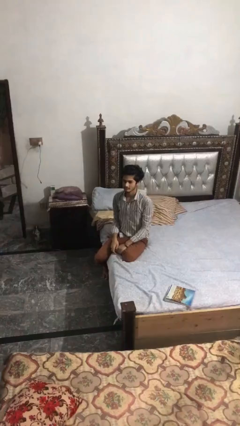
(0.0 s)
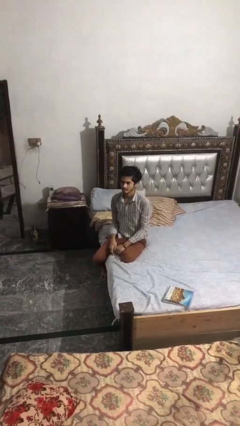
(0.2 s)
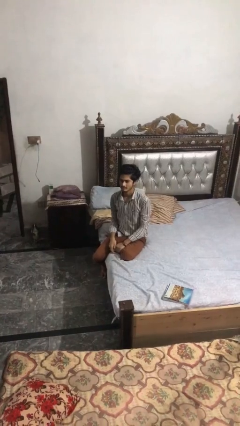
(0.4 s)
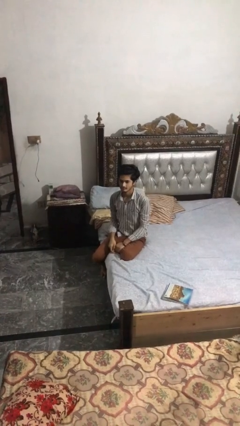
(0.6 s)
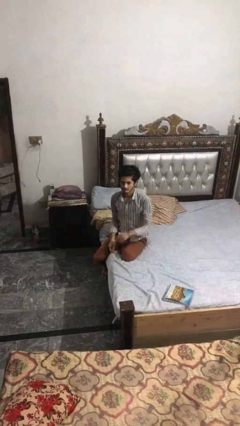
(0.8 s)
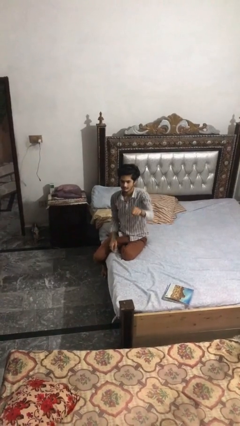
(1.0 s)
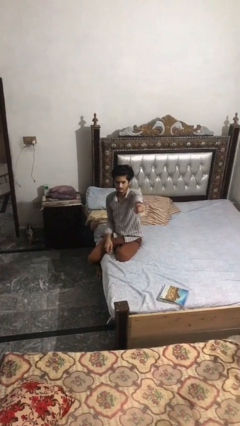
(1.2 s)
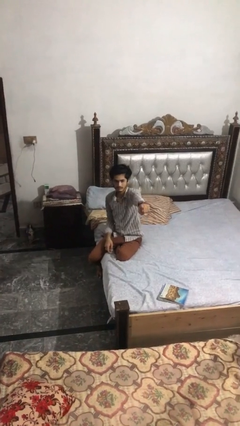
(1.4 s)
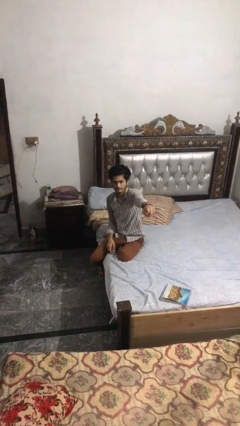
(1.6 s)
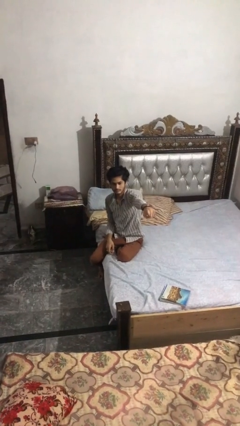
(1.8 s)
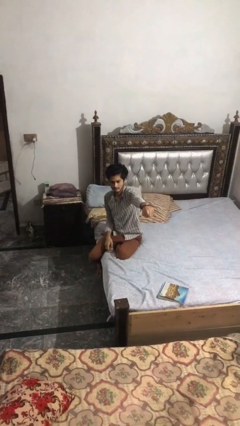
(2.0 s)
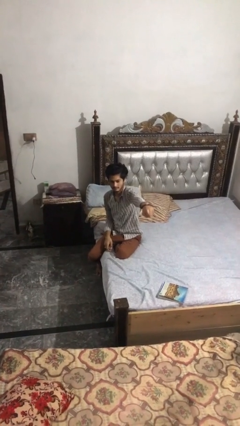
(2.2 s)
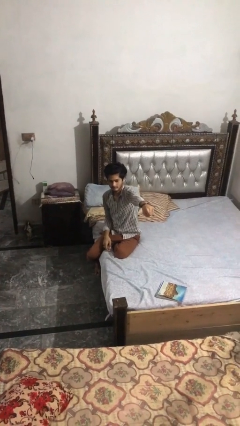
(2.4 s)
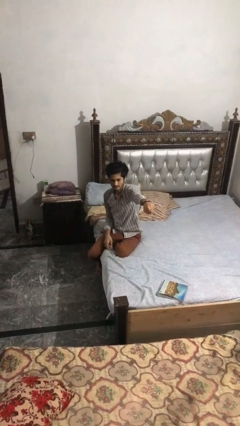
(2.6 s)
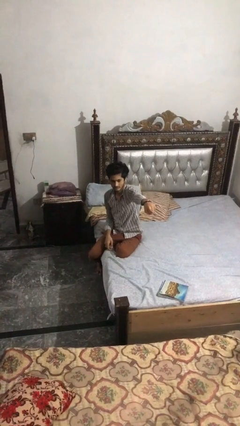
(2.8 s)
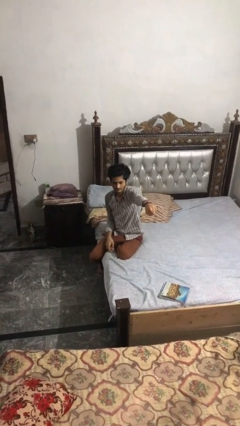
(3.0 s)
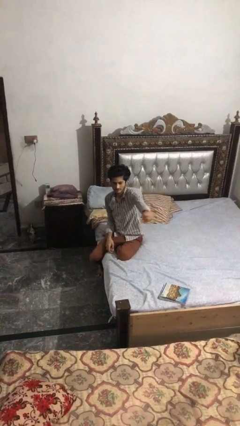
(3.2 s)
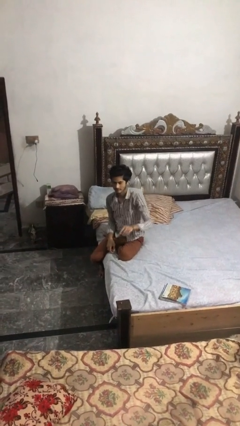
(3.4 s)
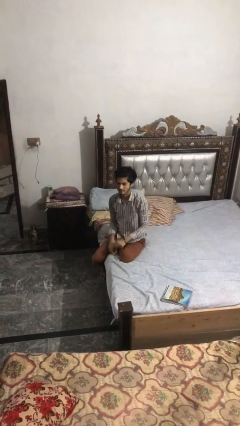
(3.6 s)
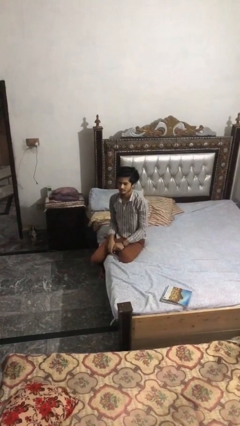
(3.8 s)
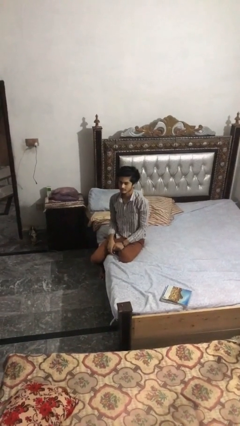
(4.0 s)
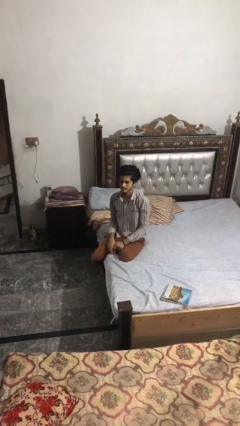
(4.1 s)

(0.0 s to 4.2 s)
person points at person

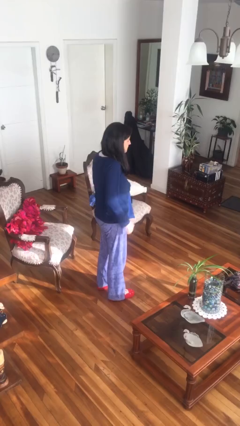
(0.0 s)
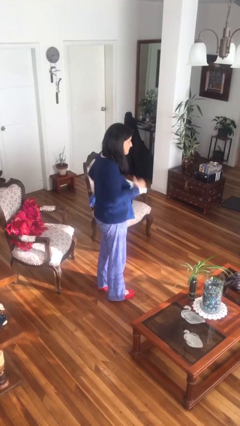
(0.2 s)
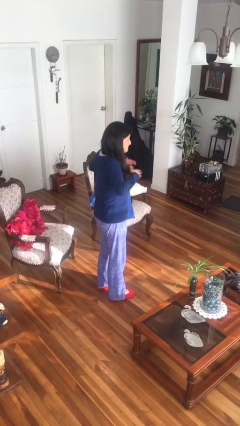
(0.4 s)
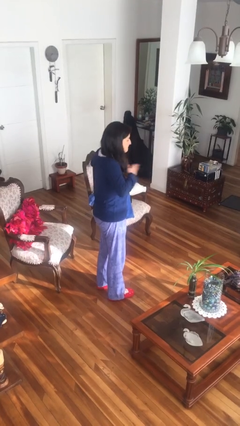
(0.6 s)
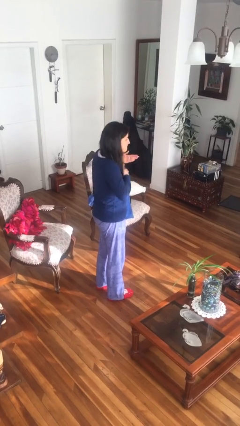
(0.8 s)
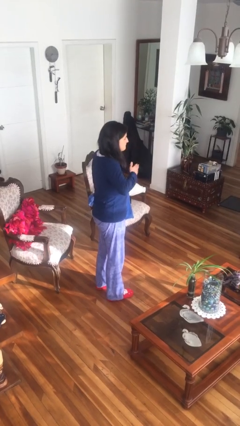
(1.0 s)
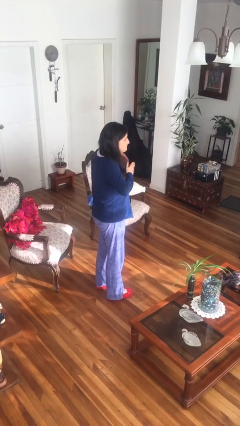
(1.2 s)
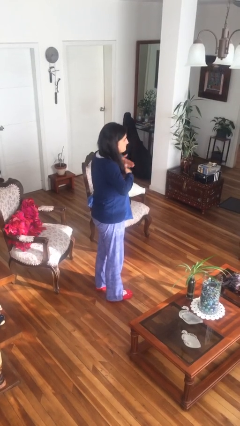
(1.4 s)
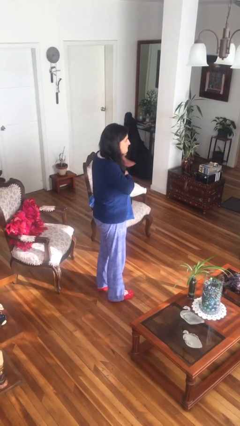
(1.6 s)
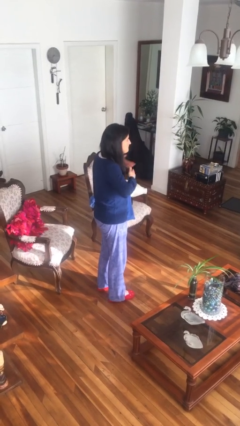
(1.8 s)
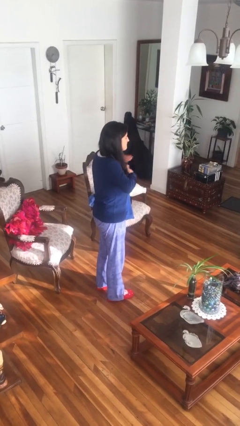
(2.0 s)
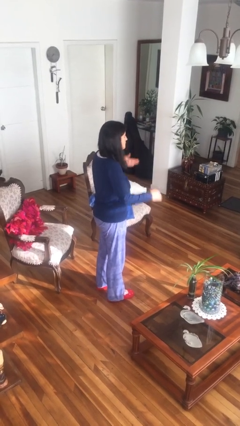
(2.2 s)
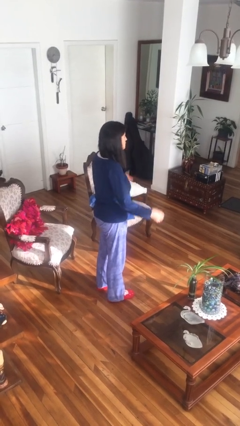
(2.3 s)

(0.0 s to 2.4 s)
person drums on chest

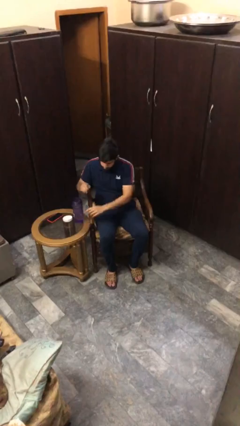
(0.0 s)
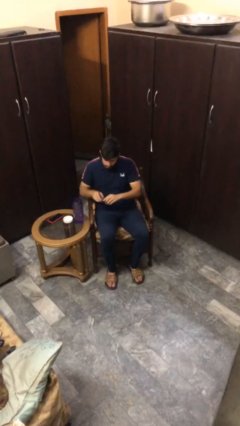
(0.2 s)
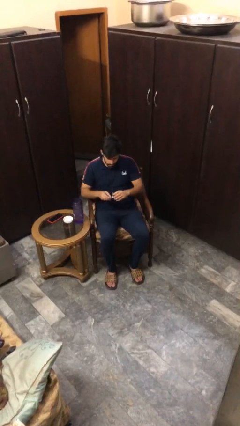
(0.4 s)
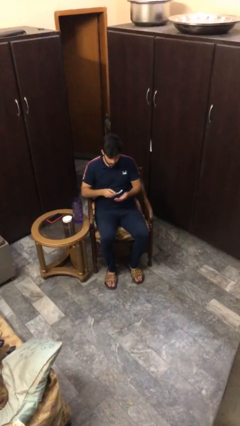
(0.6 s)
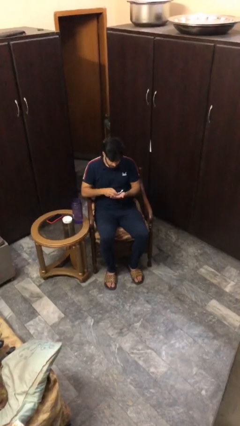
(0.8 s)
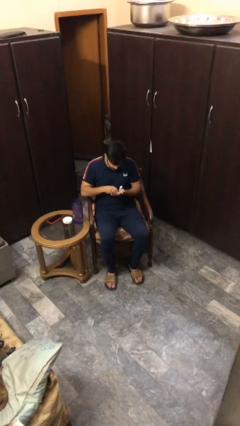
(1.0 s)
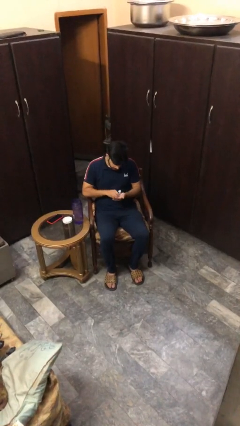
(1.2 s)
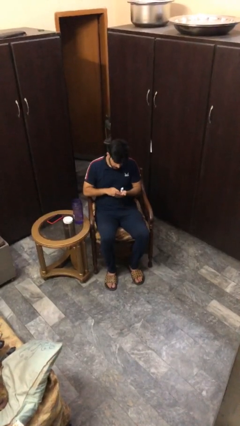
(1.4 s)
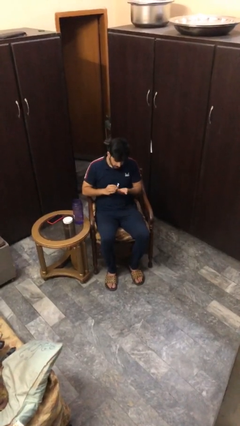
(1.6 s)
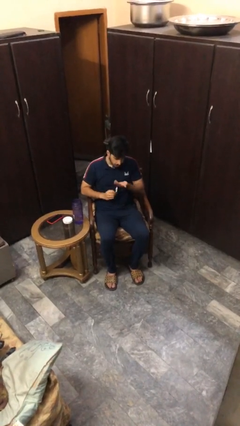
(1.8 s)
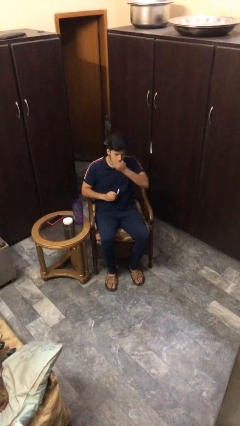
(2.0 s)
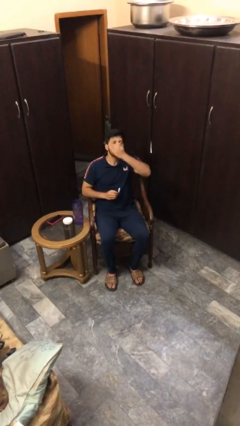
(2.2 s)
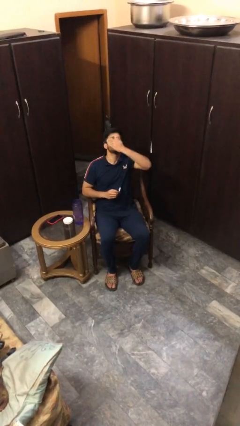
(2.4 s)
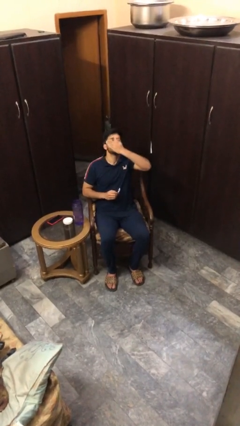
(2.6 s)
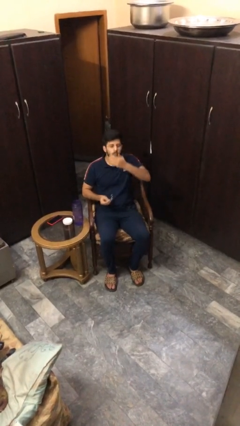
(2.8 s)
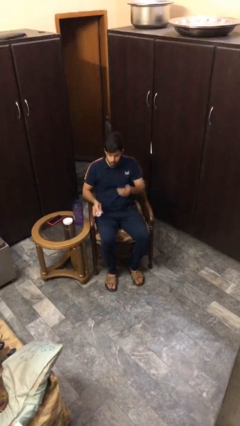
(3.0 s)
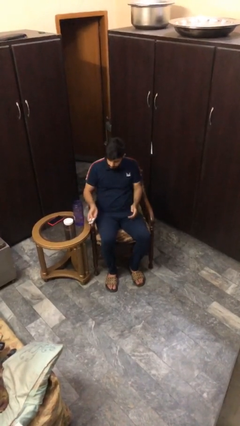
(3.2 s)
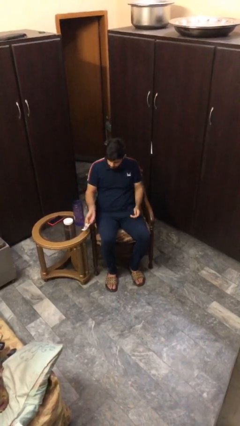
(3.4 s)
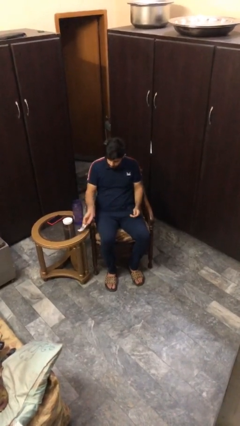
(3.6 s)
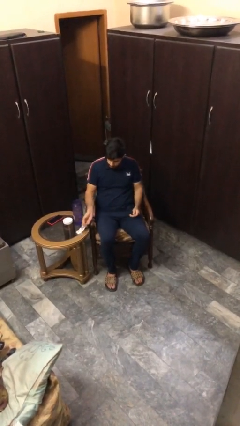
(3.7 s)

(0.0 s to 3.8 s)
person takes medicine pills

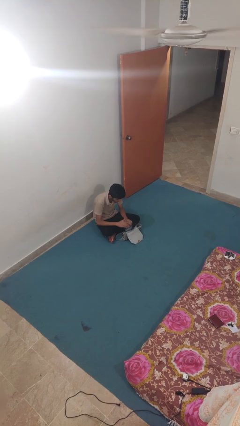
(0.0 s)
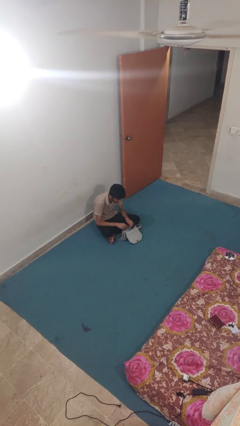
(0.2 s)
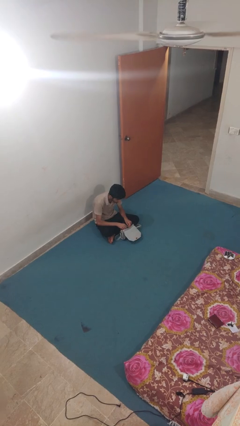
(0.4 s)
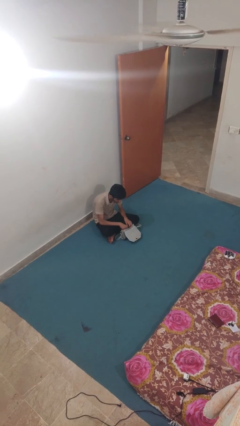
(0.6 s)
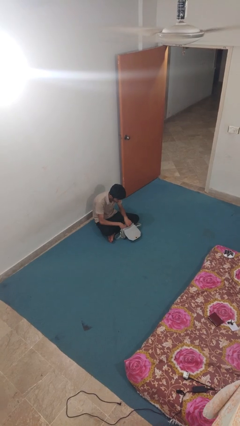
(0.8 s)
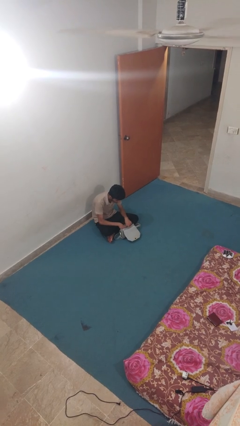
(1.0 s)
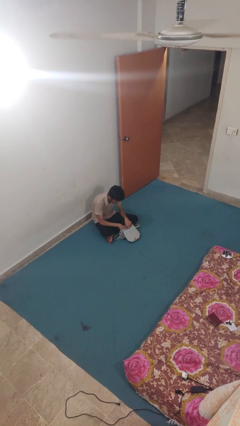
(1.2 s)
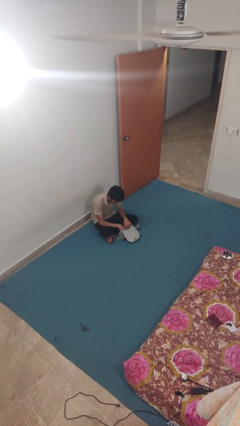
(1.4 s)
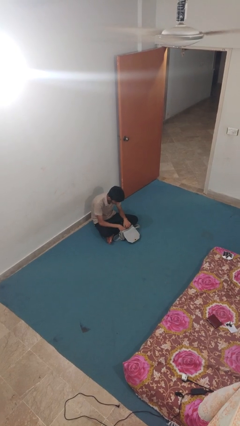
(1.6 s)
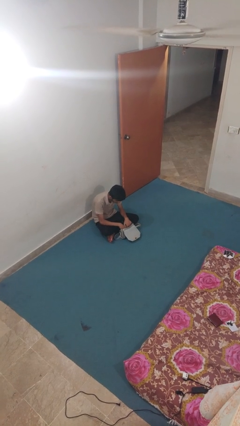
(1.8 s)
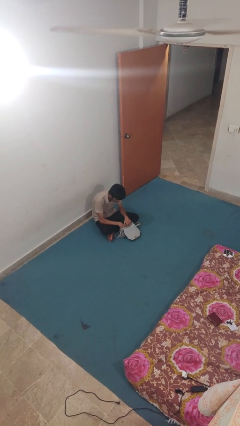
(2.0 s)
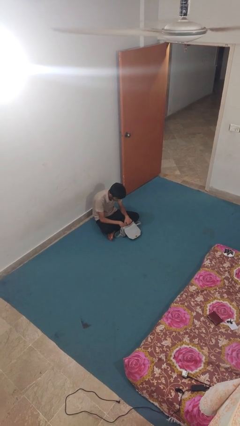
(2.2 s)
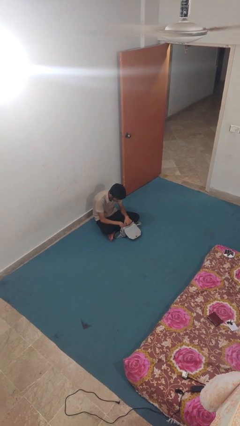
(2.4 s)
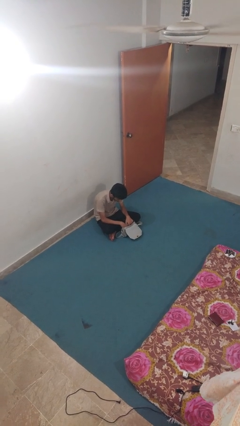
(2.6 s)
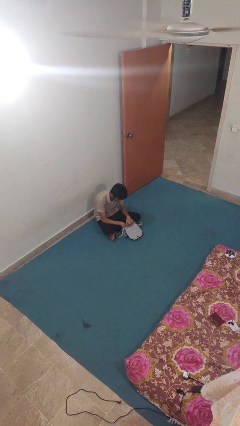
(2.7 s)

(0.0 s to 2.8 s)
person searches in purse

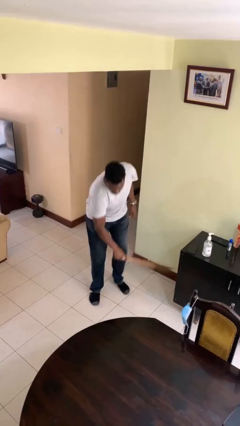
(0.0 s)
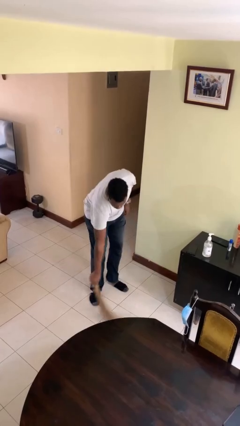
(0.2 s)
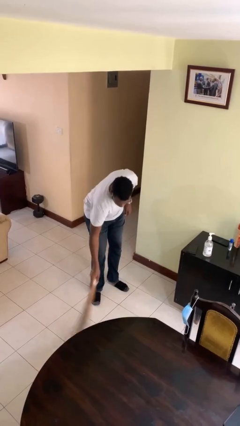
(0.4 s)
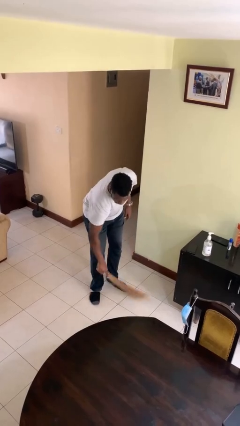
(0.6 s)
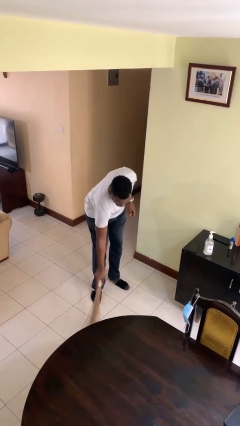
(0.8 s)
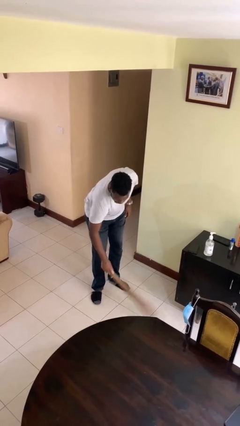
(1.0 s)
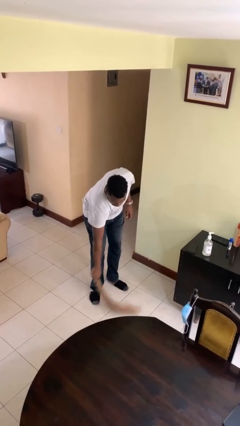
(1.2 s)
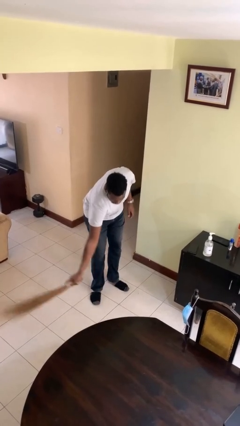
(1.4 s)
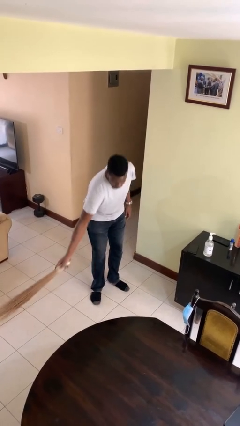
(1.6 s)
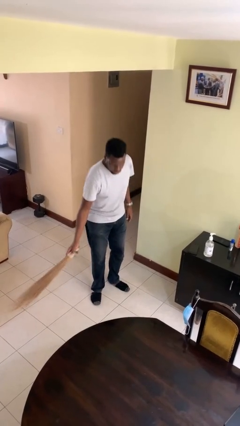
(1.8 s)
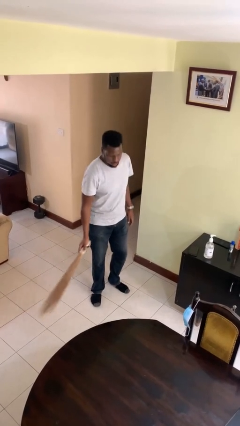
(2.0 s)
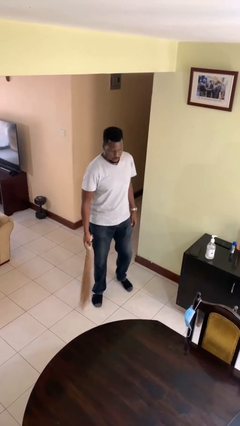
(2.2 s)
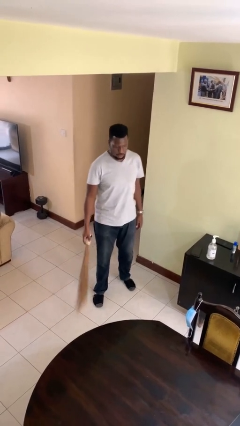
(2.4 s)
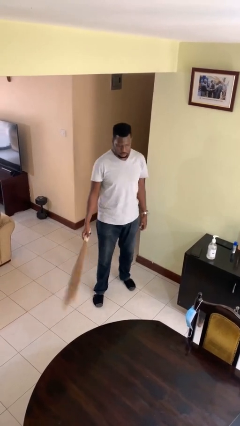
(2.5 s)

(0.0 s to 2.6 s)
person sweeps floor

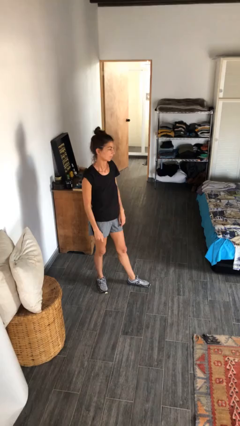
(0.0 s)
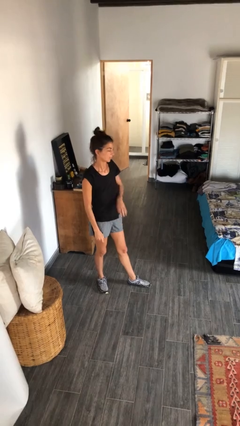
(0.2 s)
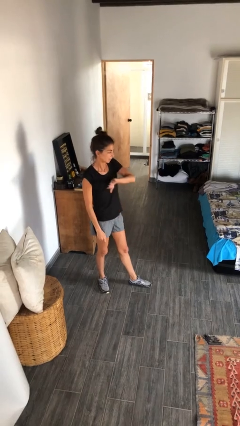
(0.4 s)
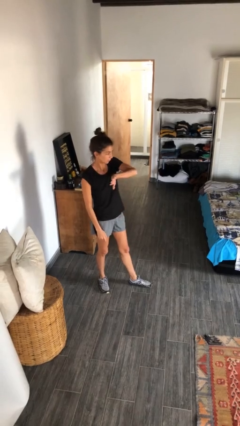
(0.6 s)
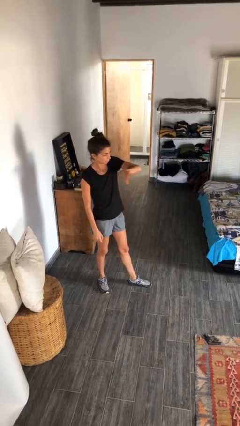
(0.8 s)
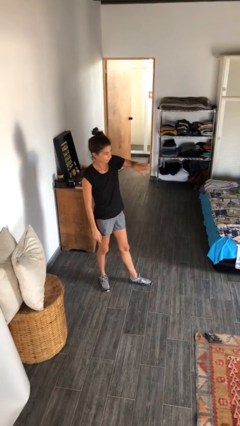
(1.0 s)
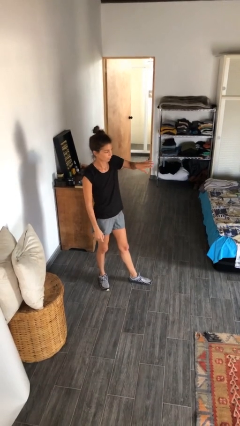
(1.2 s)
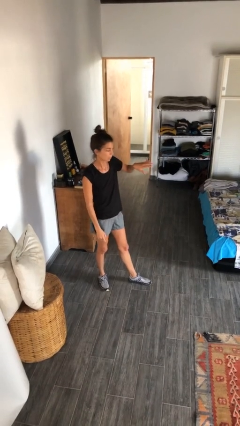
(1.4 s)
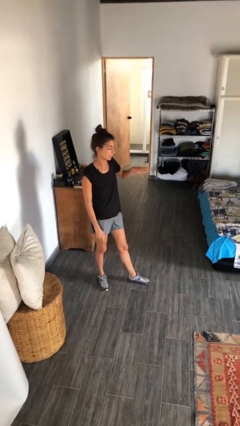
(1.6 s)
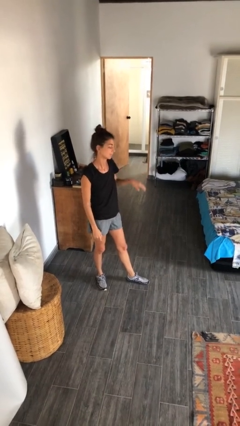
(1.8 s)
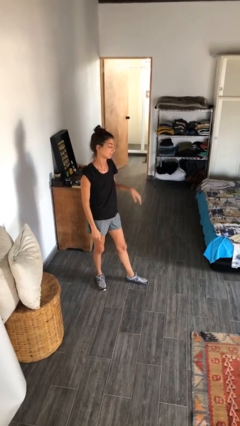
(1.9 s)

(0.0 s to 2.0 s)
person gestures swipe left
